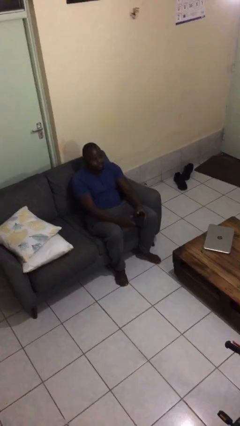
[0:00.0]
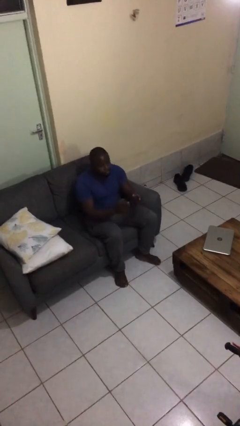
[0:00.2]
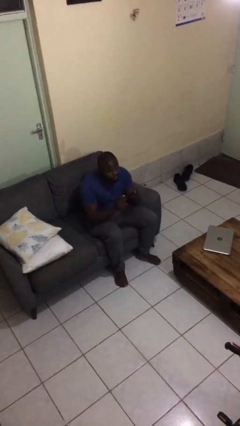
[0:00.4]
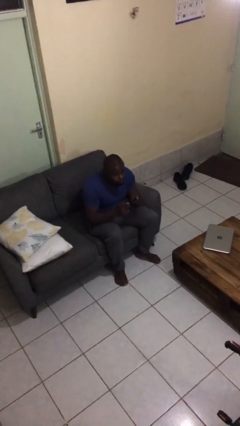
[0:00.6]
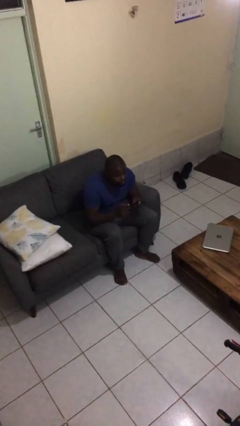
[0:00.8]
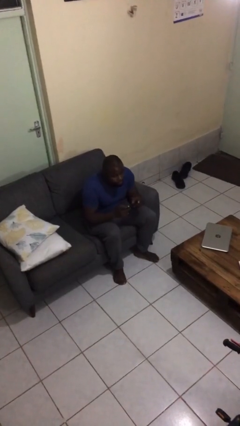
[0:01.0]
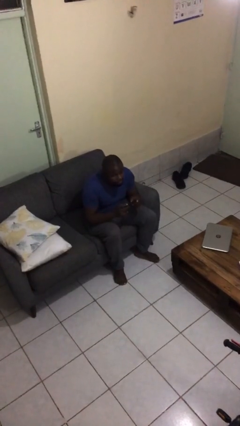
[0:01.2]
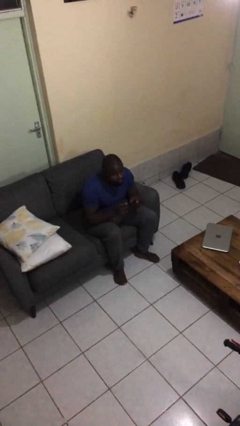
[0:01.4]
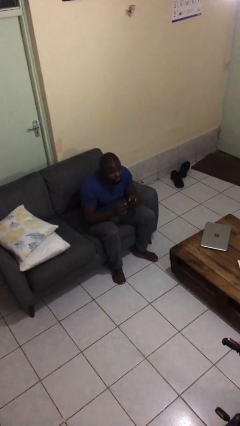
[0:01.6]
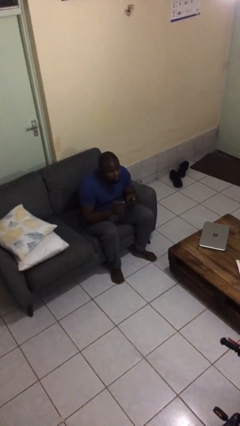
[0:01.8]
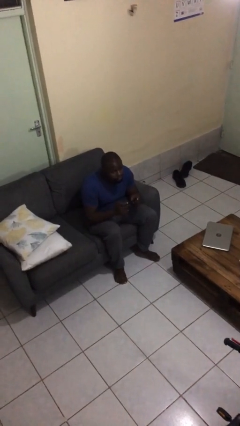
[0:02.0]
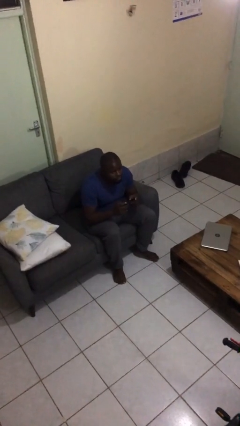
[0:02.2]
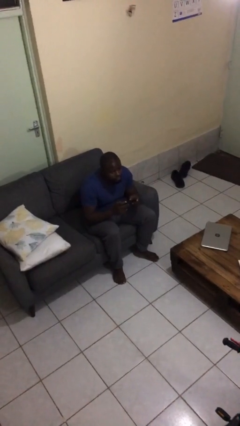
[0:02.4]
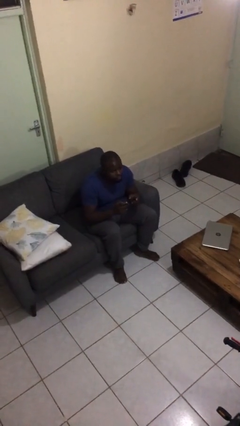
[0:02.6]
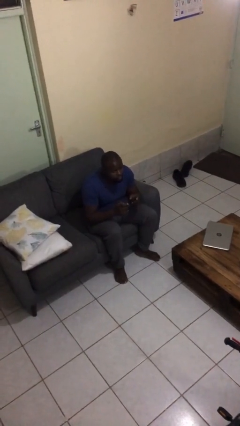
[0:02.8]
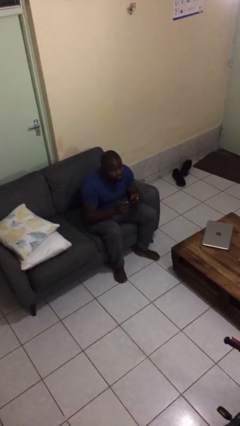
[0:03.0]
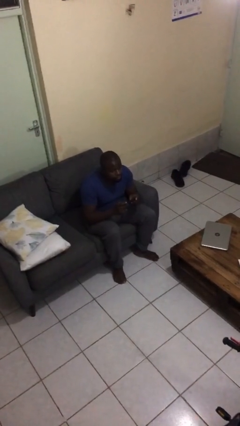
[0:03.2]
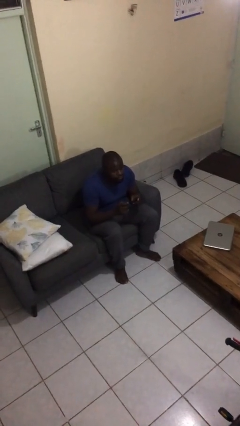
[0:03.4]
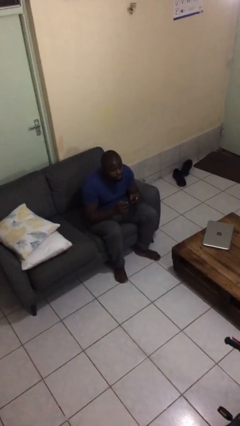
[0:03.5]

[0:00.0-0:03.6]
person interacts with handheld game

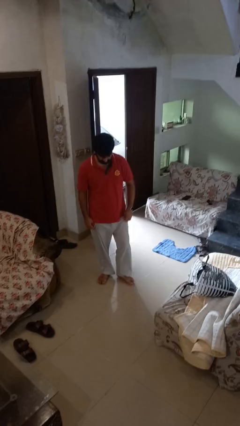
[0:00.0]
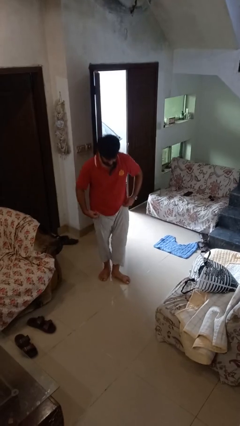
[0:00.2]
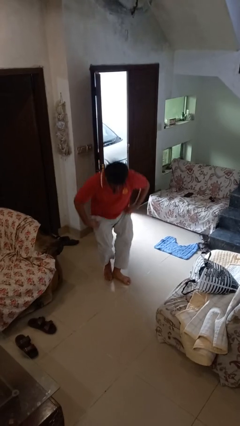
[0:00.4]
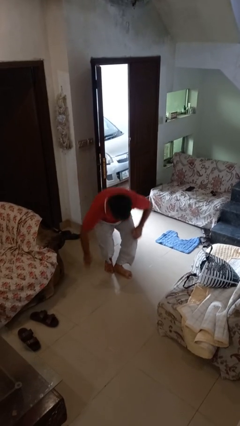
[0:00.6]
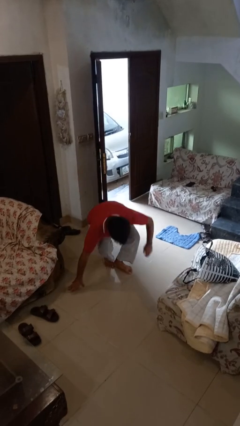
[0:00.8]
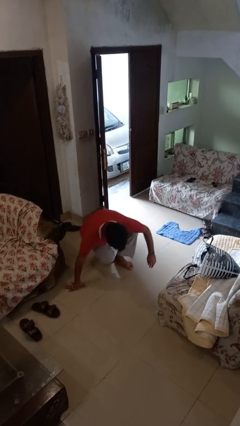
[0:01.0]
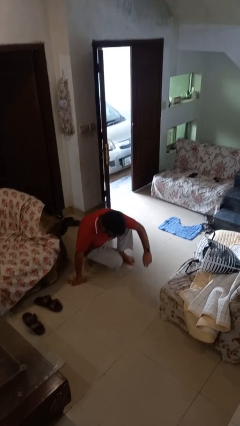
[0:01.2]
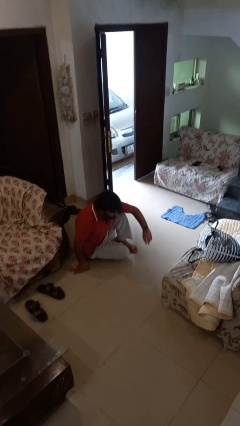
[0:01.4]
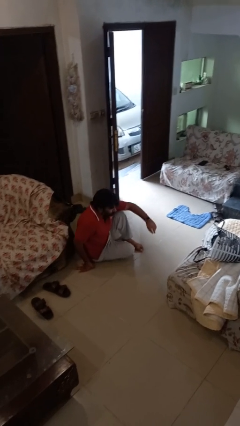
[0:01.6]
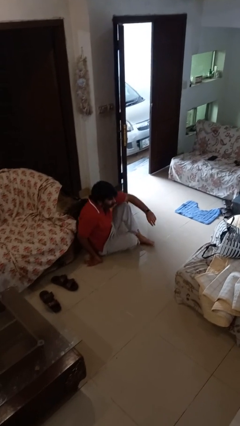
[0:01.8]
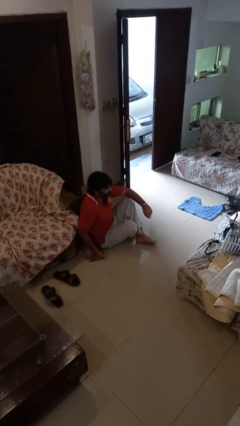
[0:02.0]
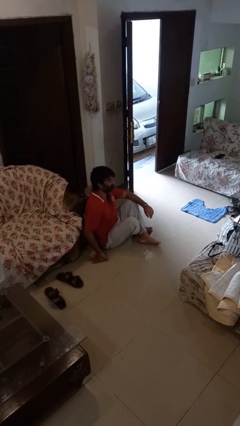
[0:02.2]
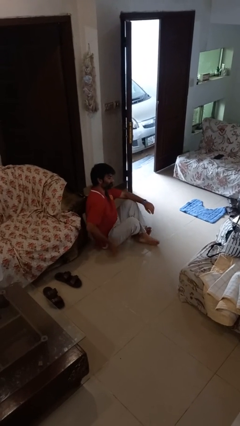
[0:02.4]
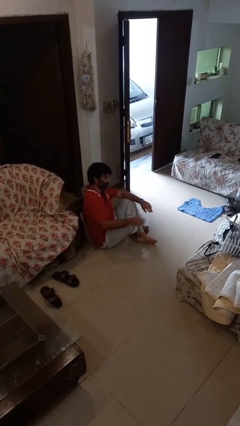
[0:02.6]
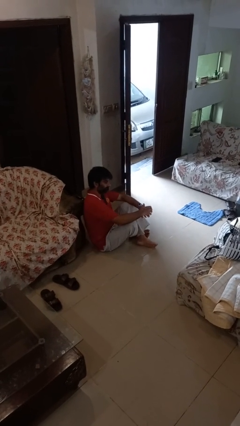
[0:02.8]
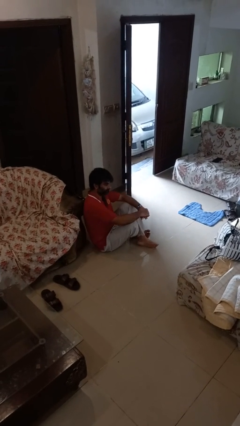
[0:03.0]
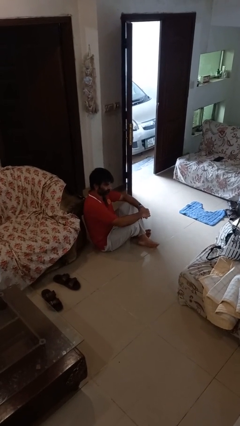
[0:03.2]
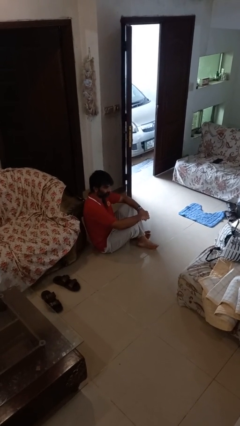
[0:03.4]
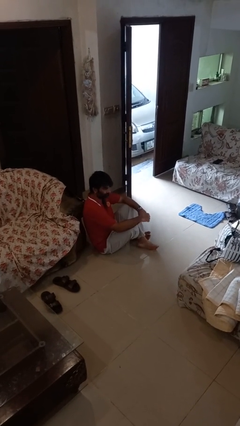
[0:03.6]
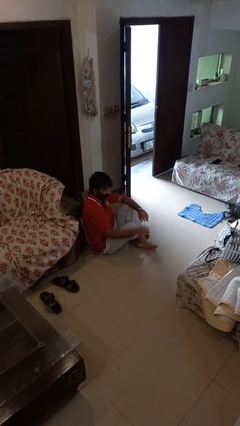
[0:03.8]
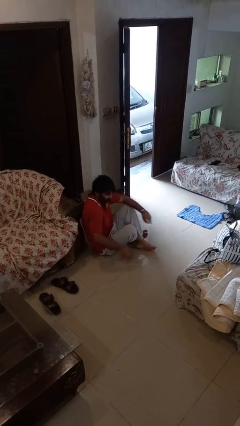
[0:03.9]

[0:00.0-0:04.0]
person sits crisscross

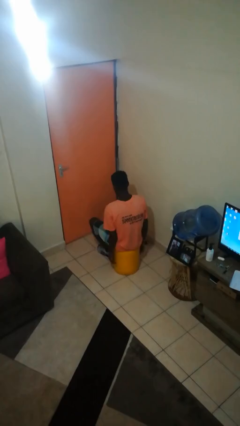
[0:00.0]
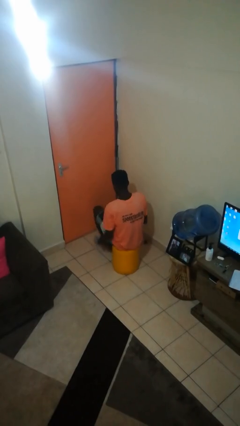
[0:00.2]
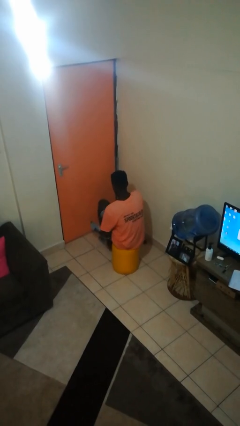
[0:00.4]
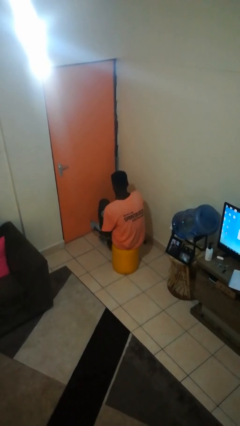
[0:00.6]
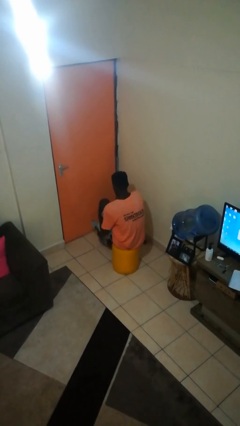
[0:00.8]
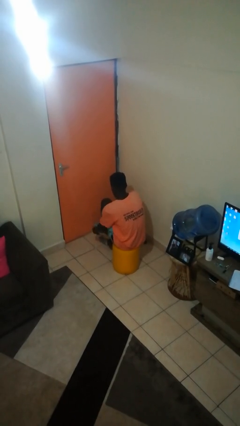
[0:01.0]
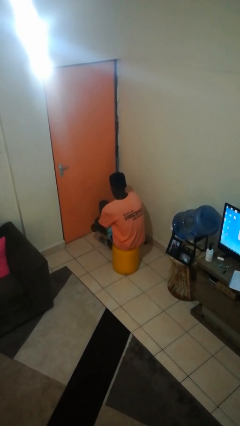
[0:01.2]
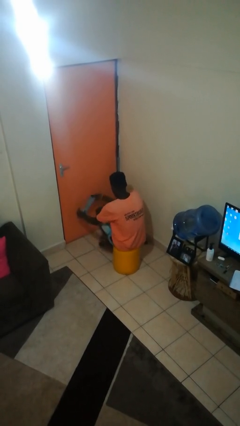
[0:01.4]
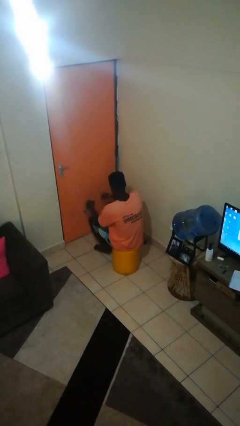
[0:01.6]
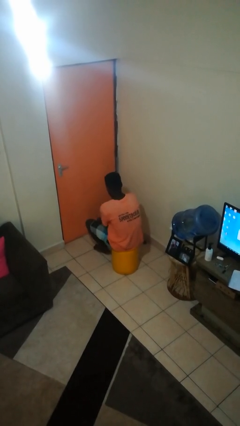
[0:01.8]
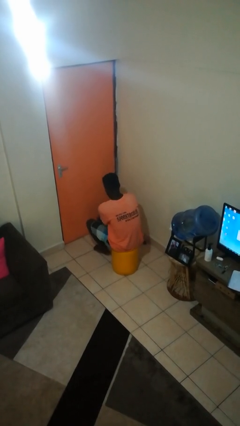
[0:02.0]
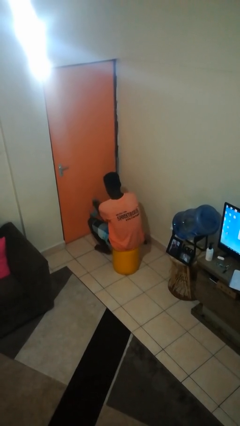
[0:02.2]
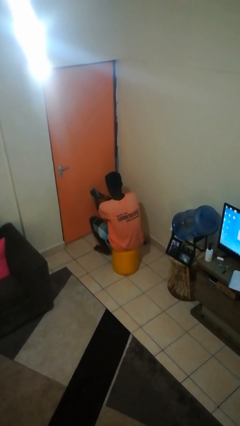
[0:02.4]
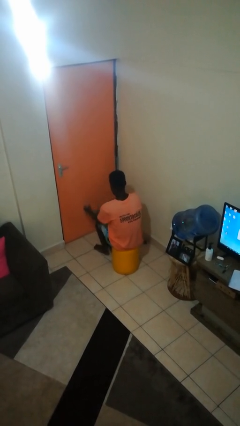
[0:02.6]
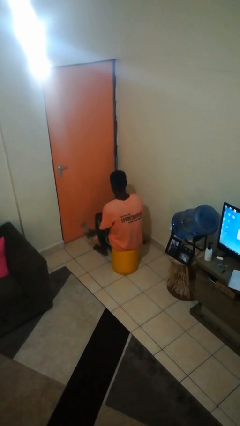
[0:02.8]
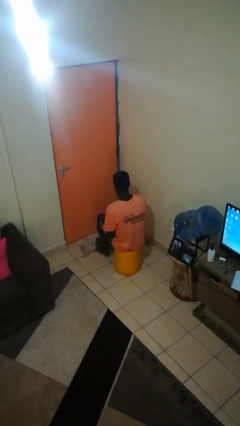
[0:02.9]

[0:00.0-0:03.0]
person takes off socks

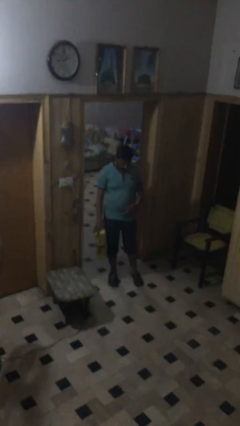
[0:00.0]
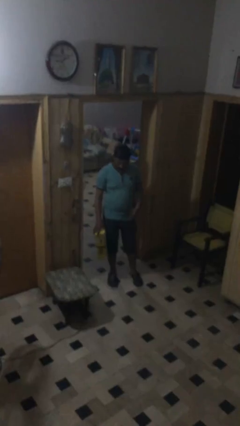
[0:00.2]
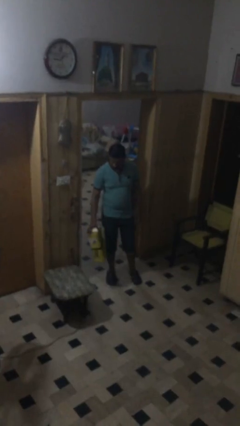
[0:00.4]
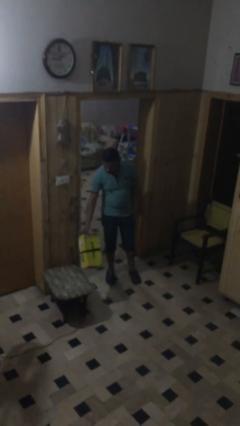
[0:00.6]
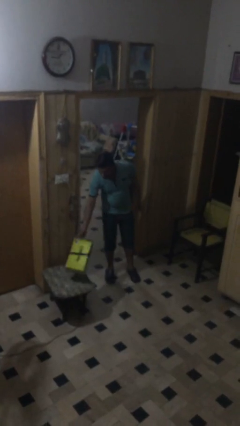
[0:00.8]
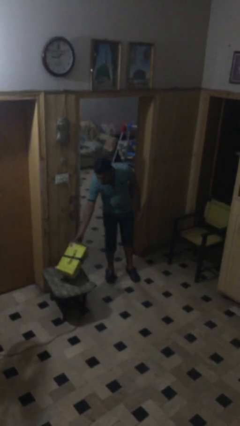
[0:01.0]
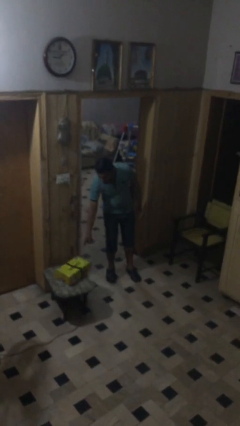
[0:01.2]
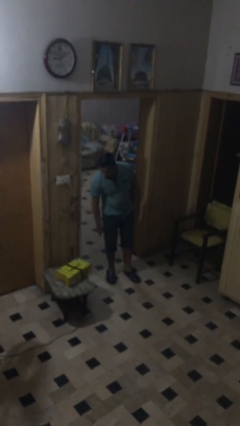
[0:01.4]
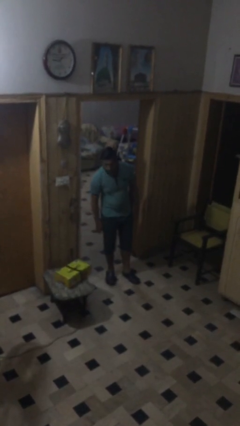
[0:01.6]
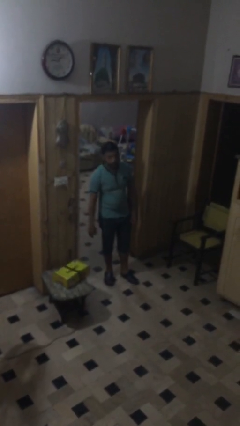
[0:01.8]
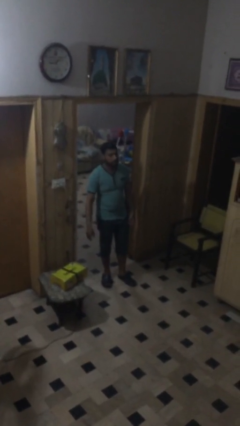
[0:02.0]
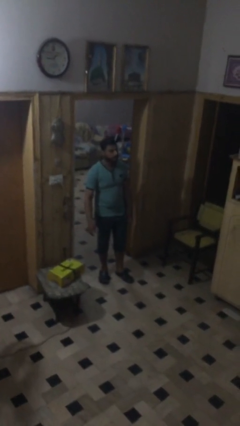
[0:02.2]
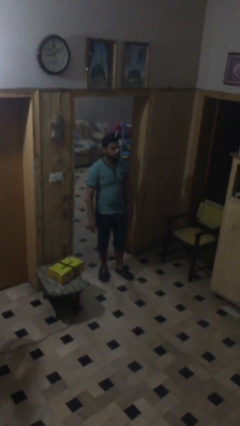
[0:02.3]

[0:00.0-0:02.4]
person puts down object on table

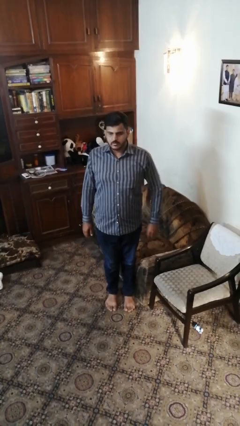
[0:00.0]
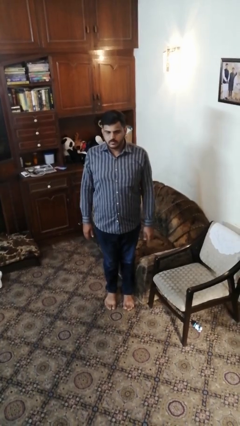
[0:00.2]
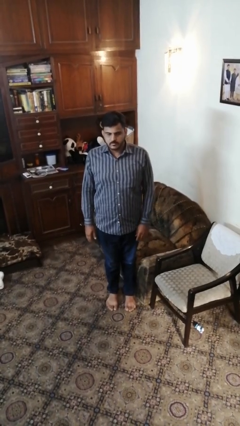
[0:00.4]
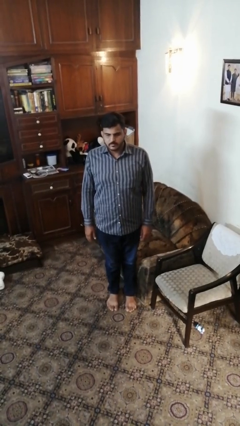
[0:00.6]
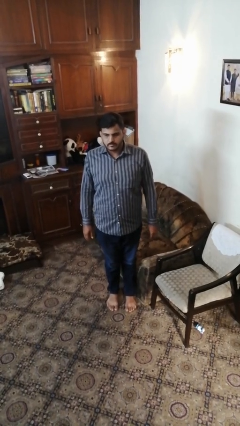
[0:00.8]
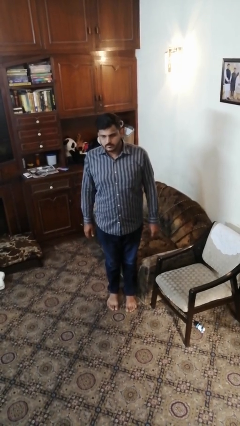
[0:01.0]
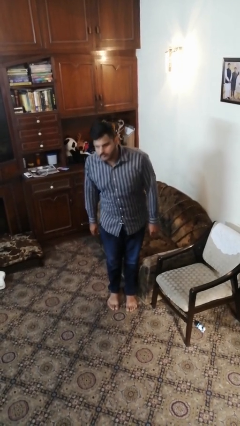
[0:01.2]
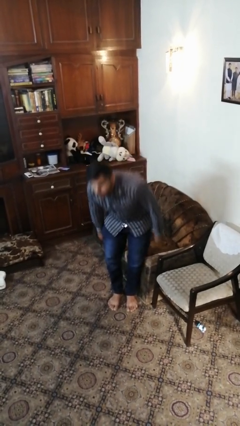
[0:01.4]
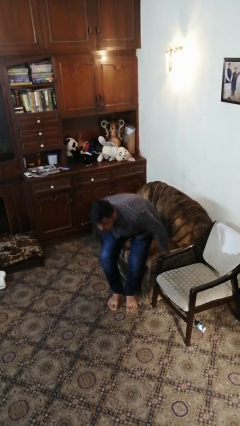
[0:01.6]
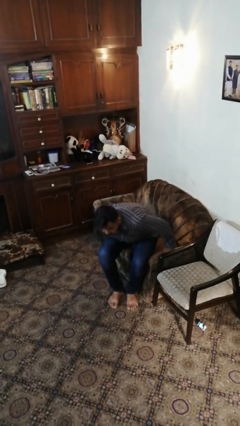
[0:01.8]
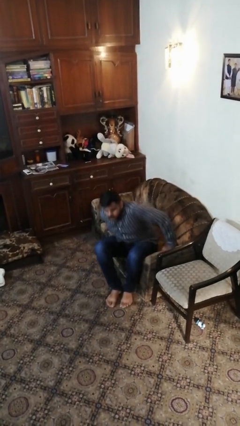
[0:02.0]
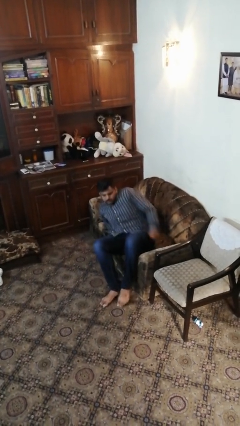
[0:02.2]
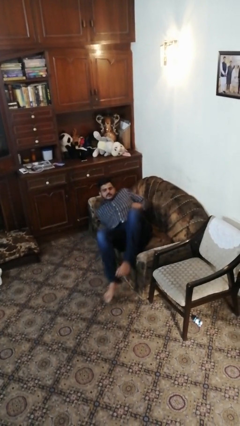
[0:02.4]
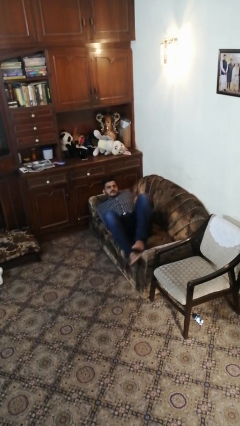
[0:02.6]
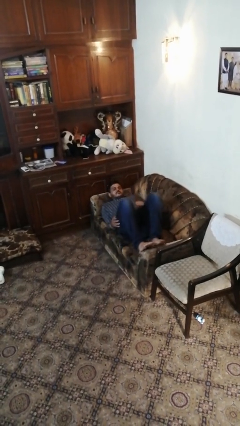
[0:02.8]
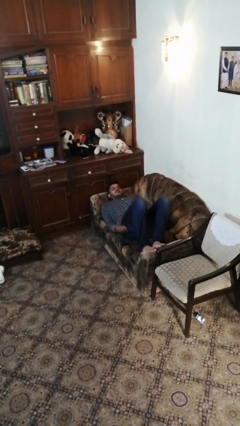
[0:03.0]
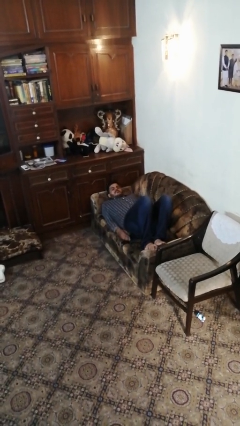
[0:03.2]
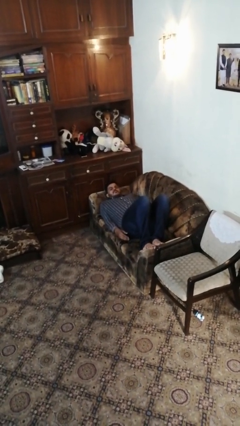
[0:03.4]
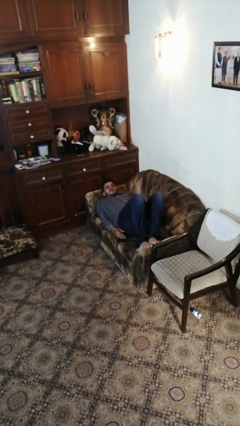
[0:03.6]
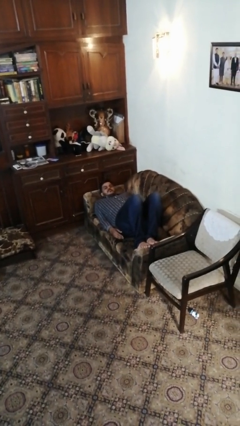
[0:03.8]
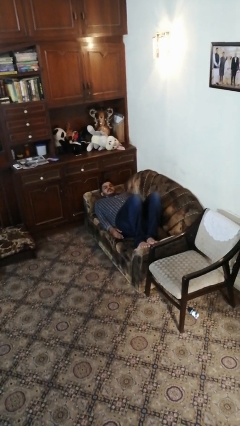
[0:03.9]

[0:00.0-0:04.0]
person lies down on couch

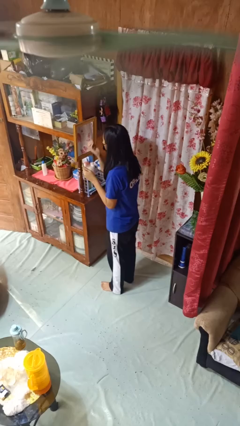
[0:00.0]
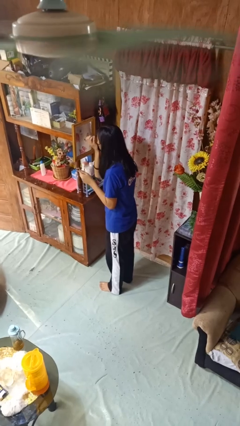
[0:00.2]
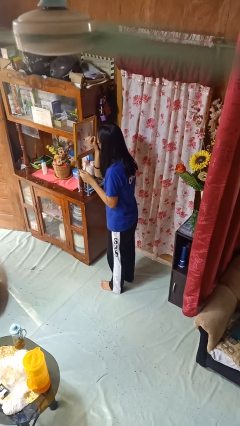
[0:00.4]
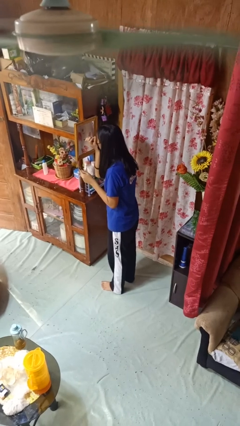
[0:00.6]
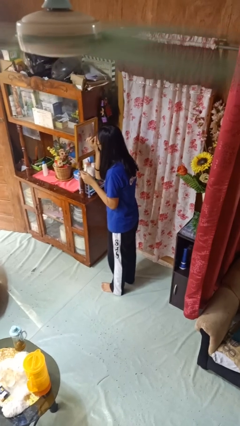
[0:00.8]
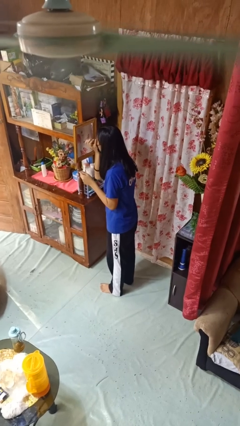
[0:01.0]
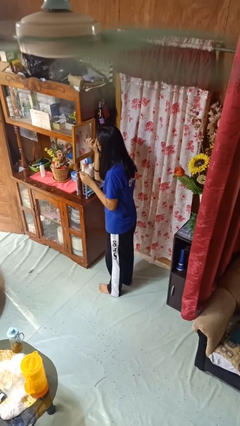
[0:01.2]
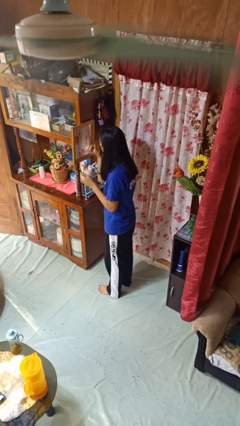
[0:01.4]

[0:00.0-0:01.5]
person applies eye makeup
